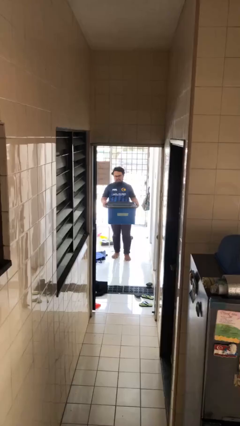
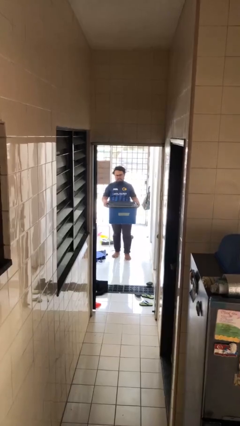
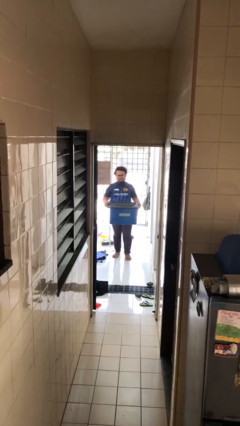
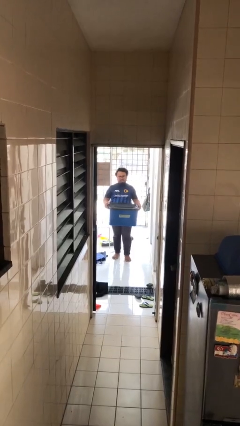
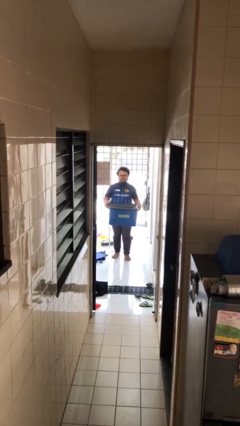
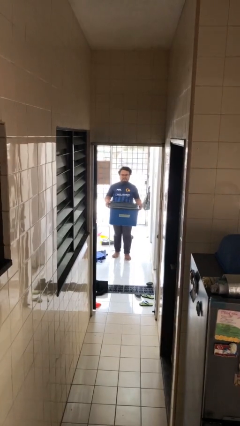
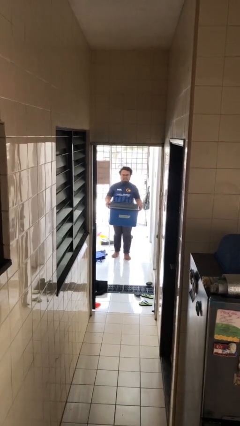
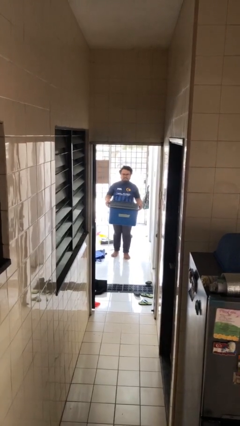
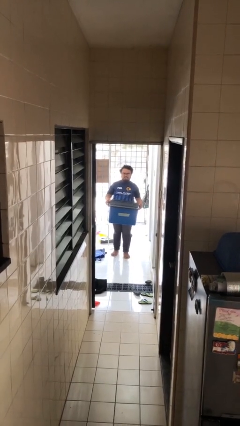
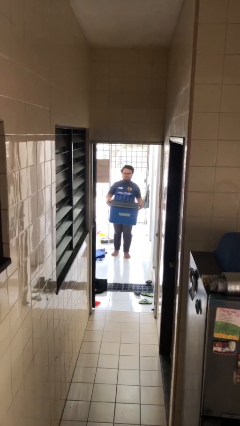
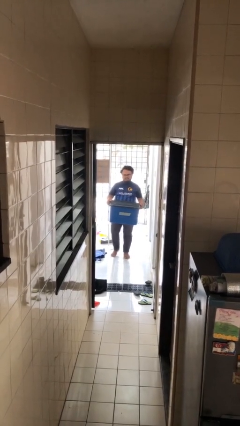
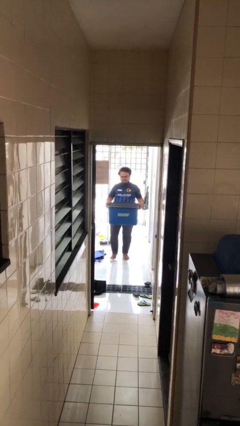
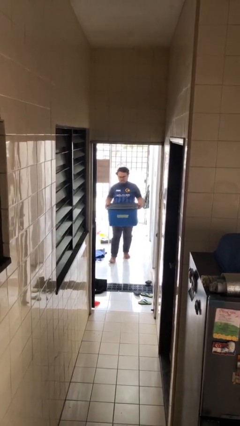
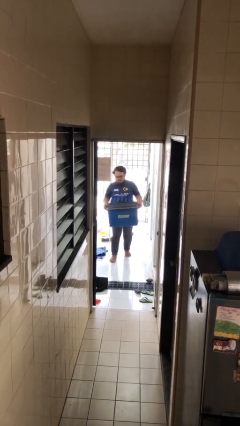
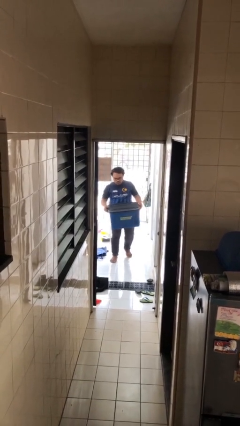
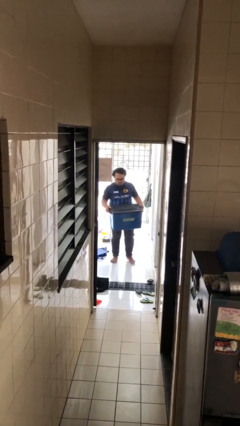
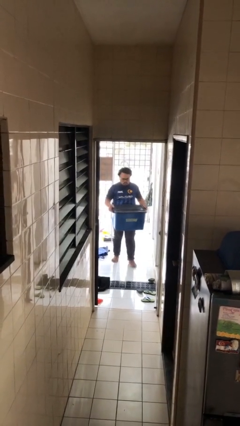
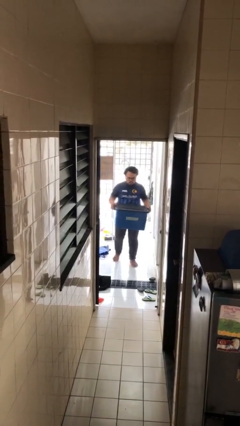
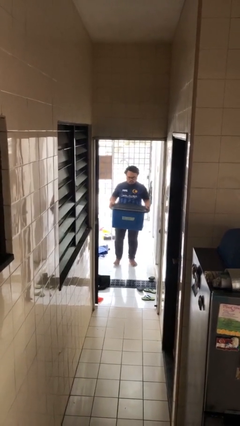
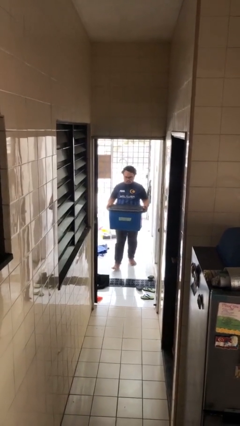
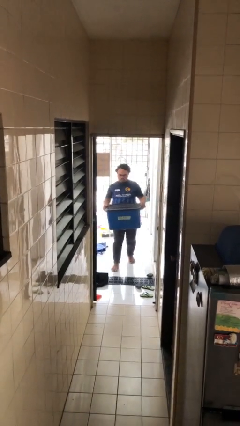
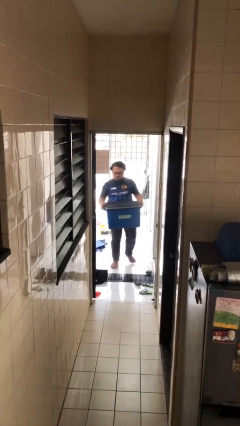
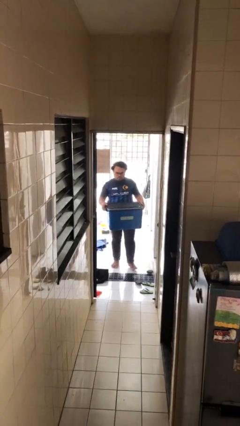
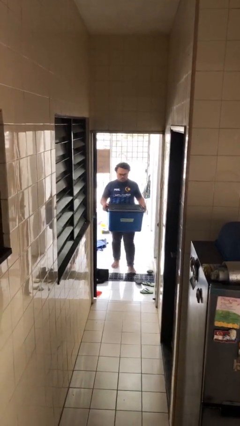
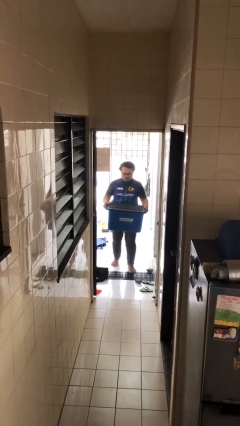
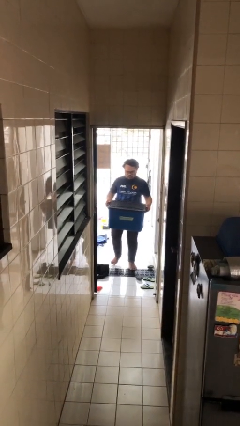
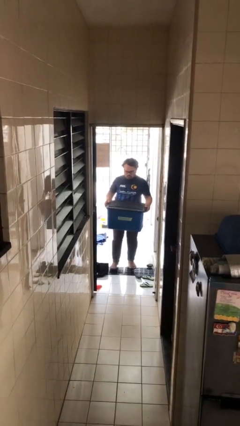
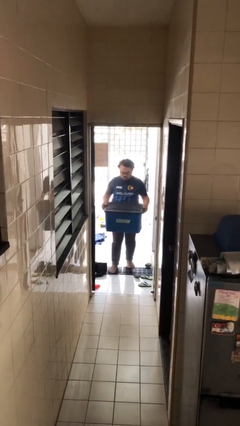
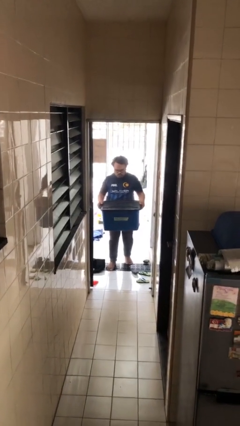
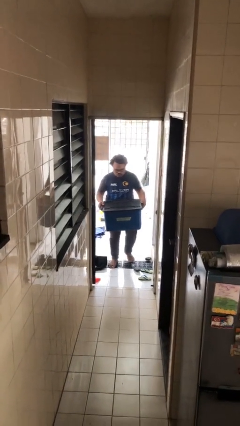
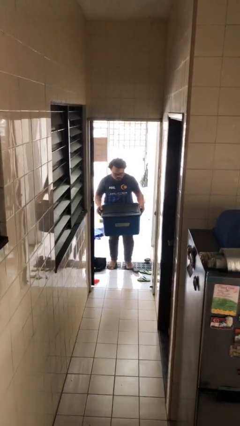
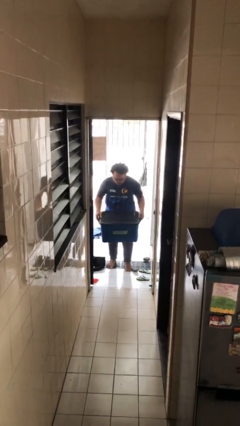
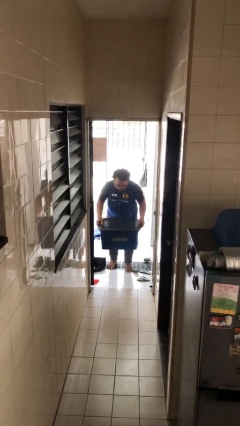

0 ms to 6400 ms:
person carries heavy object

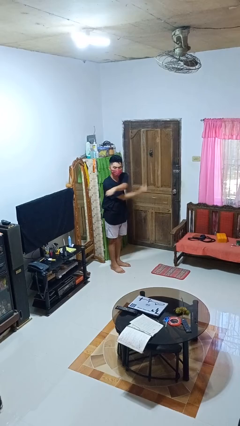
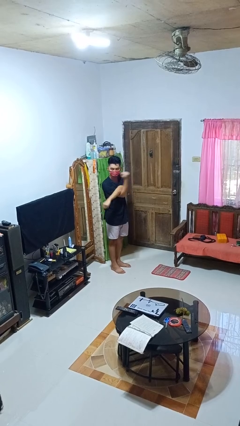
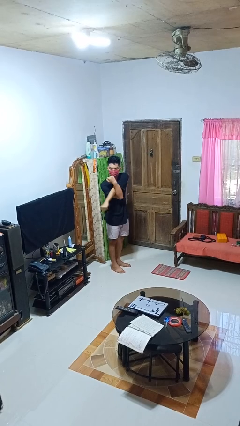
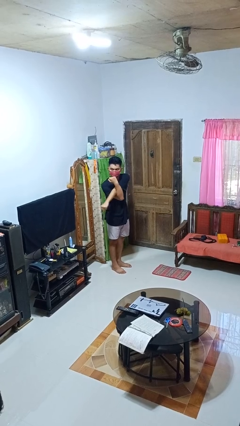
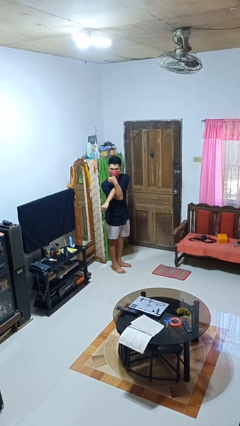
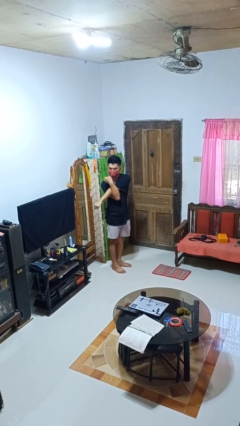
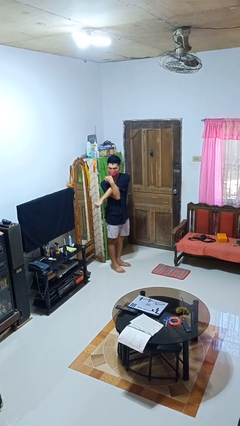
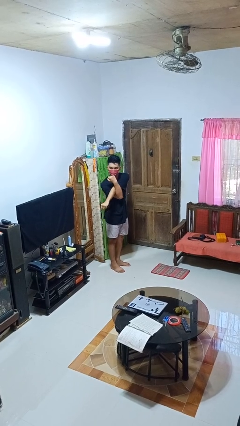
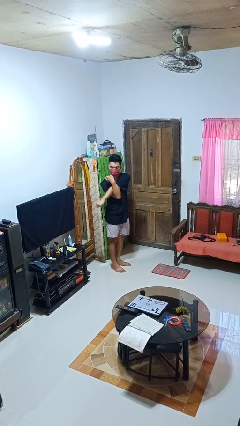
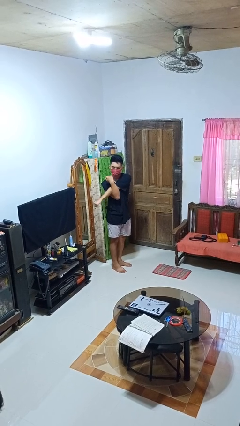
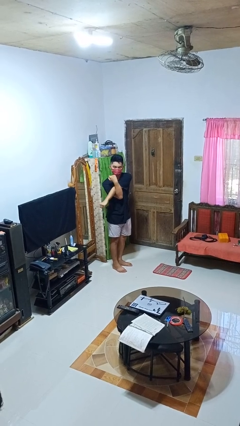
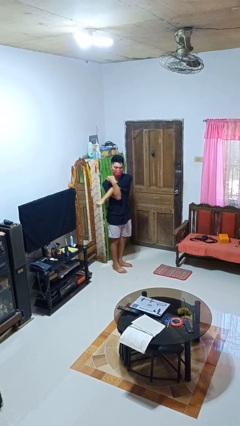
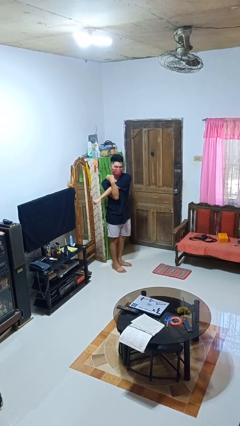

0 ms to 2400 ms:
person stretches arms to side

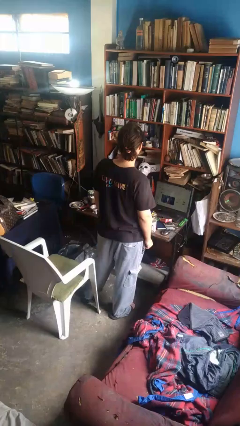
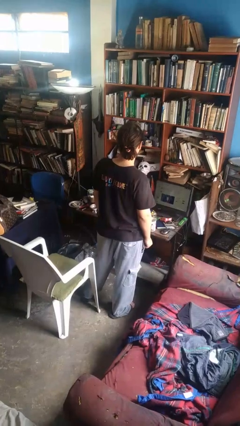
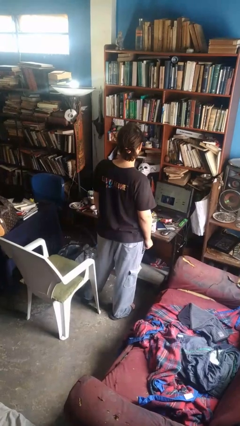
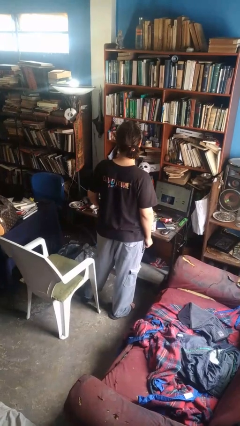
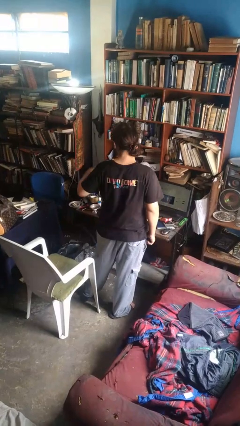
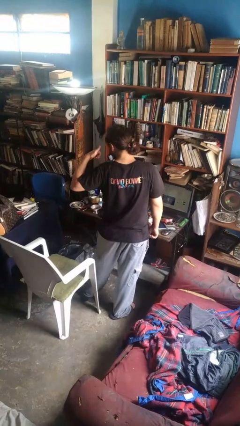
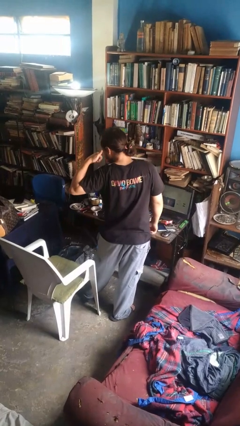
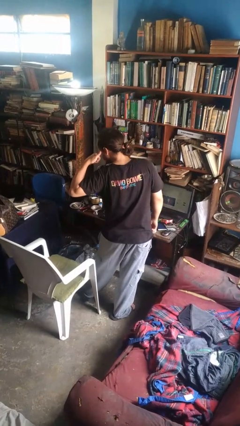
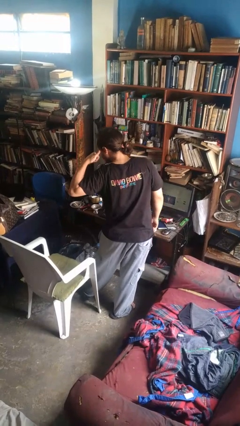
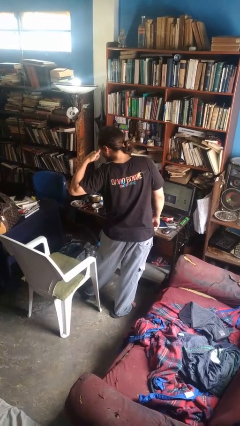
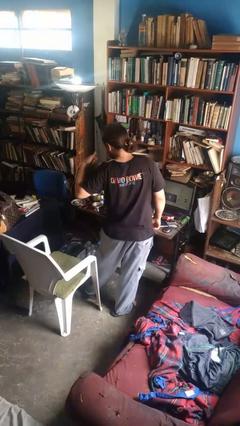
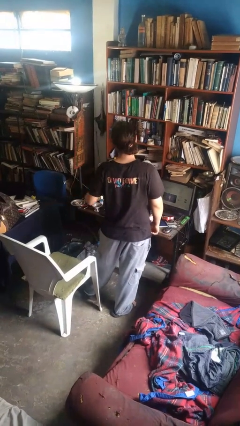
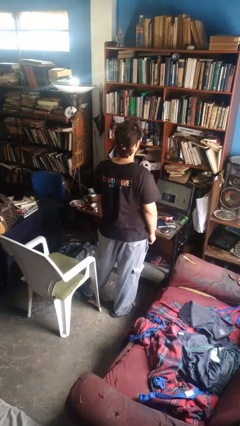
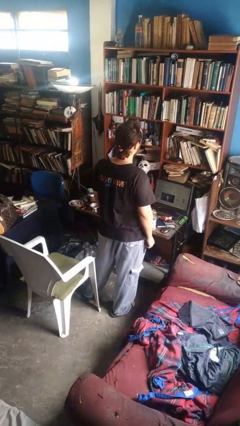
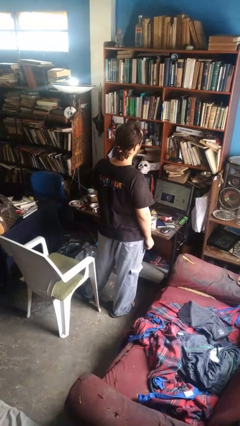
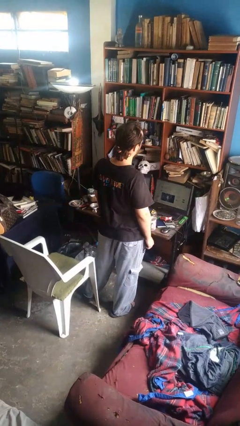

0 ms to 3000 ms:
person gestures call me

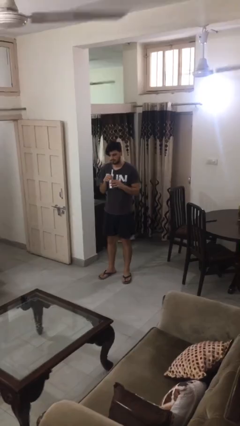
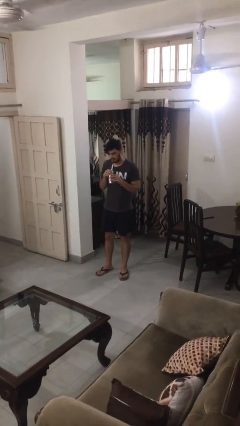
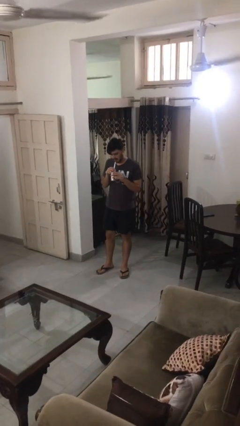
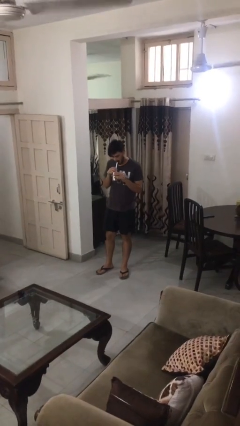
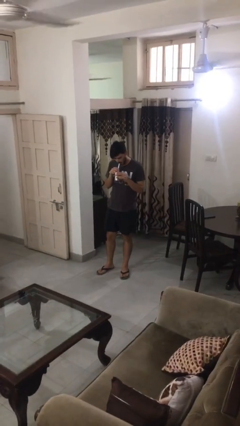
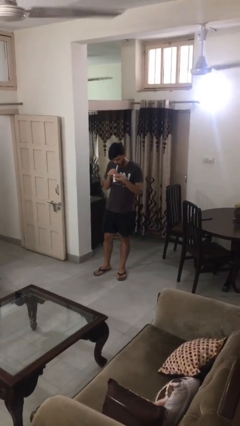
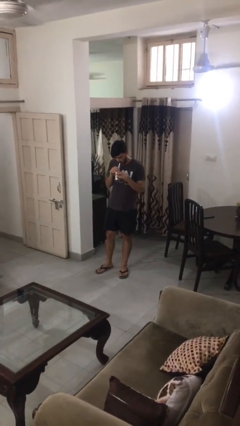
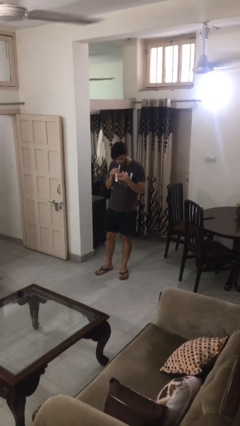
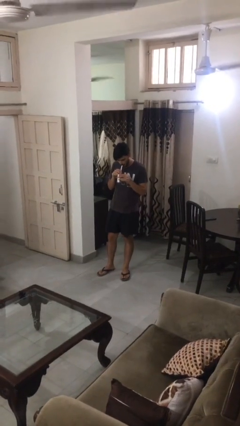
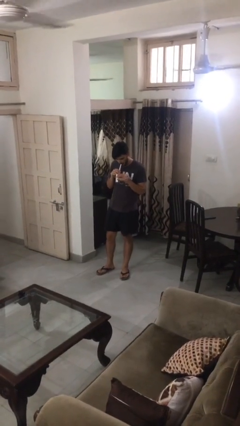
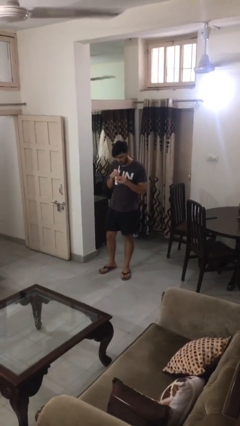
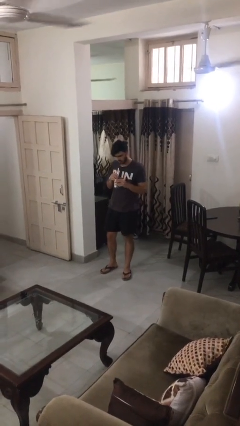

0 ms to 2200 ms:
person drinks from straw

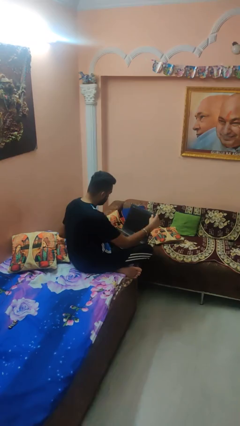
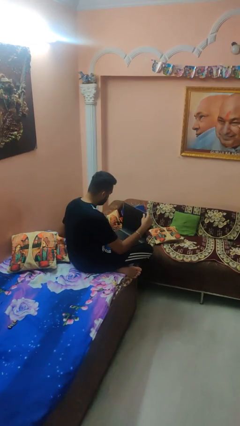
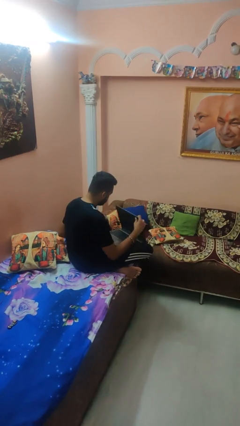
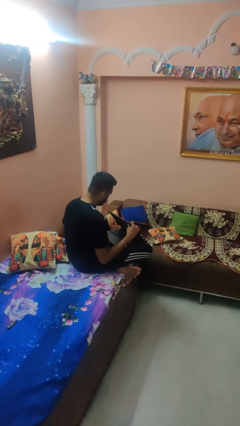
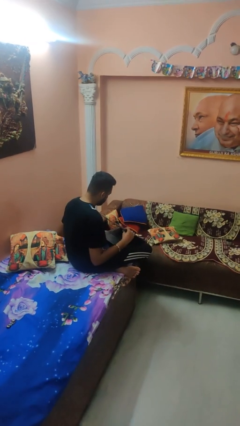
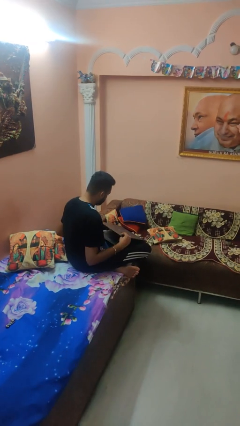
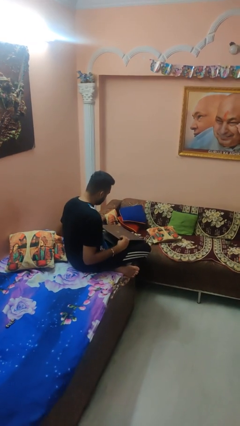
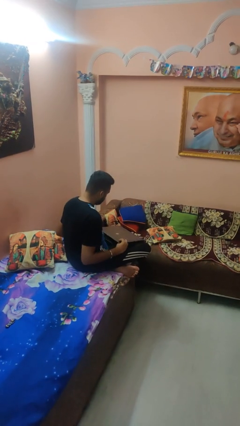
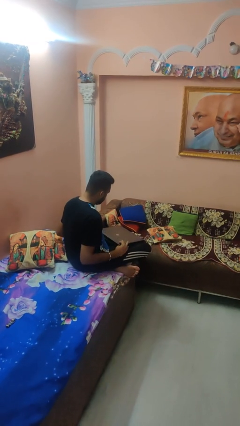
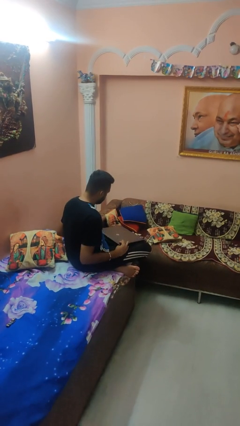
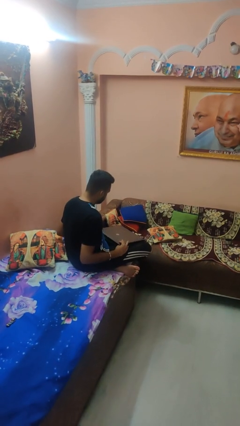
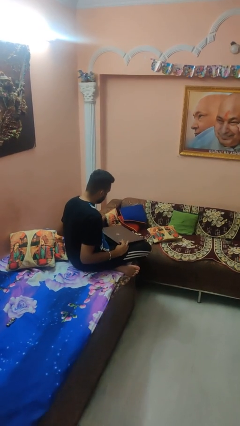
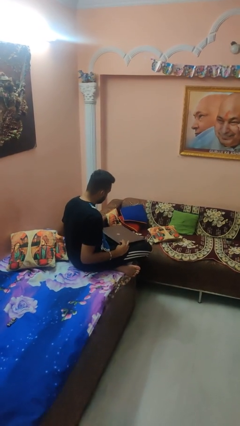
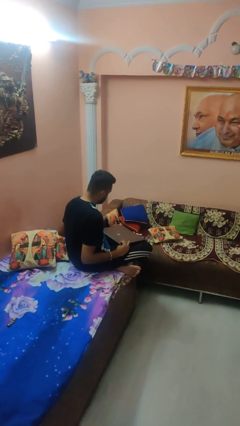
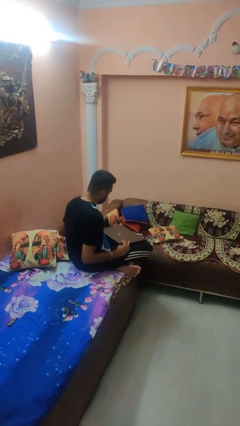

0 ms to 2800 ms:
person closes laptop

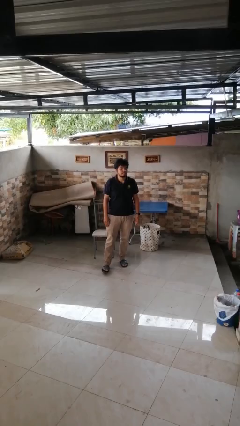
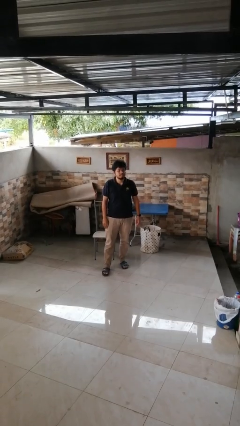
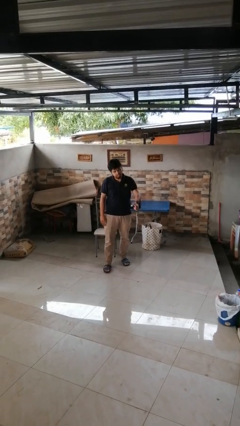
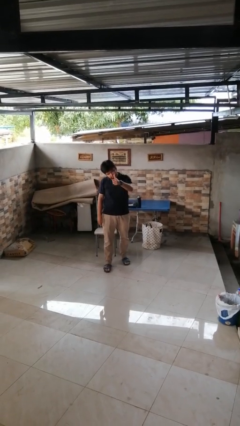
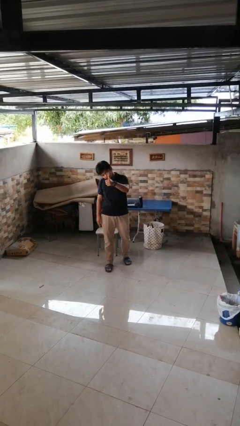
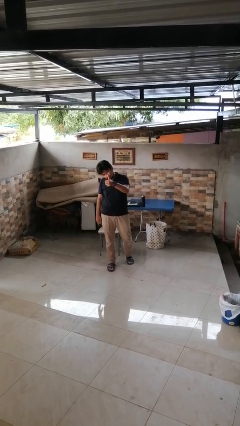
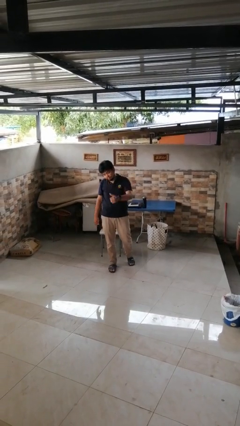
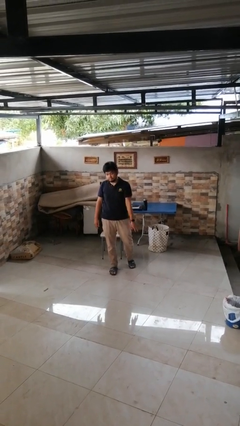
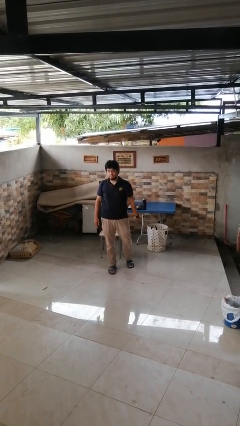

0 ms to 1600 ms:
person gestures thumbs up
